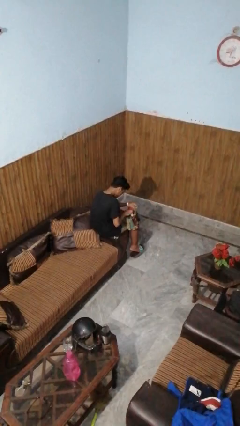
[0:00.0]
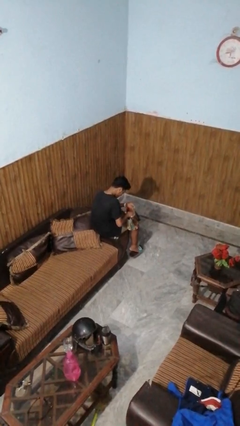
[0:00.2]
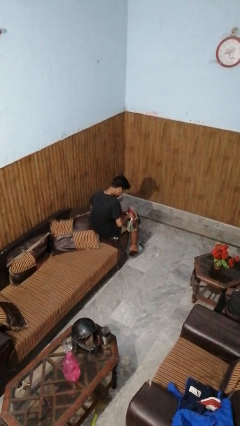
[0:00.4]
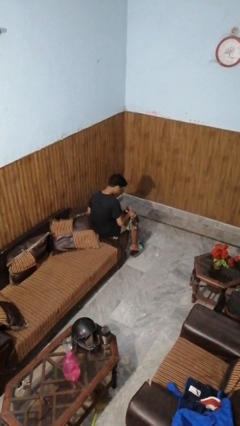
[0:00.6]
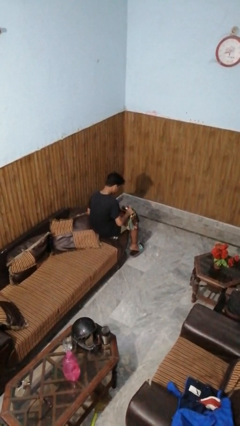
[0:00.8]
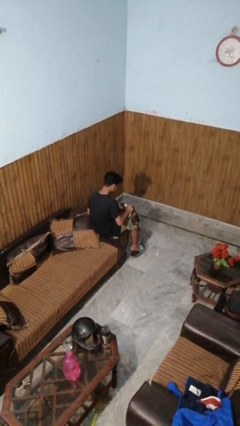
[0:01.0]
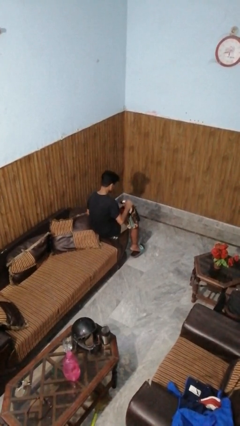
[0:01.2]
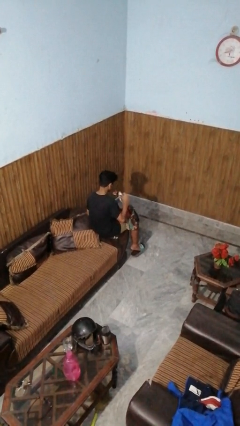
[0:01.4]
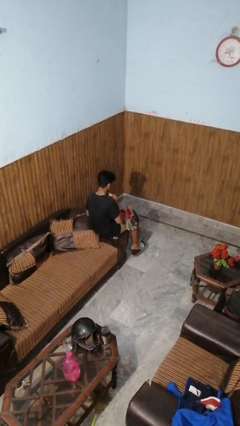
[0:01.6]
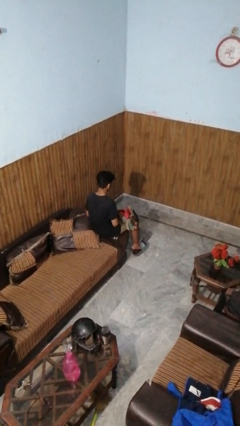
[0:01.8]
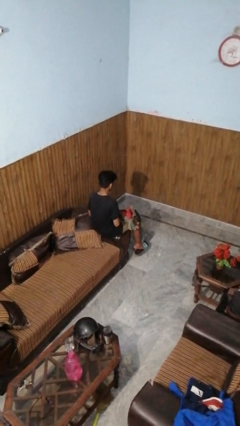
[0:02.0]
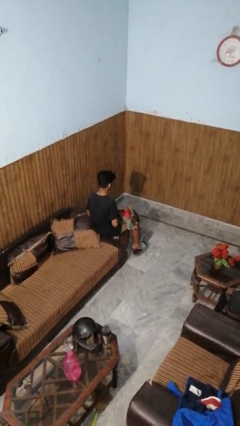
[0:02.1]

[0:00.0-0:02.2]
person takes object from purse

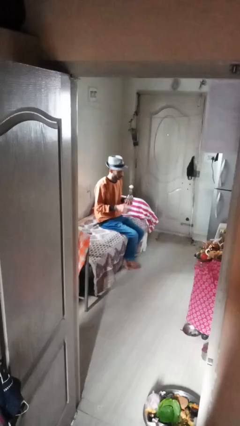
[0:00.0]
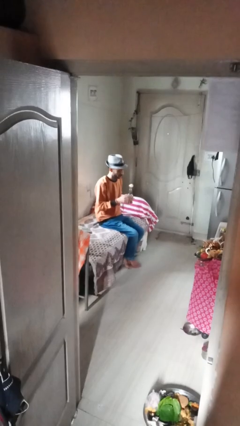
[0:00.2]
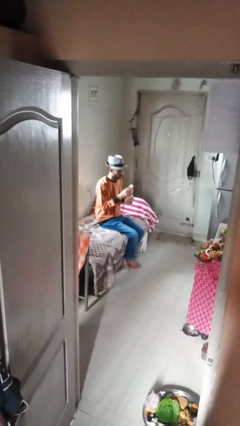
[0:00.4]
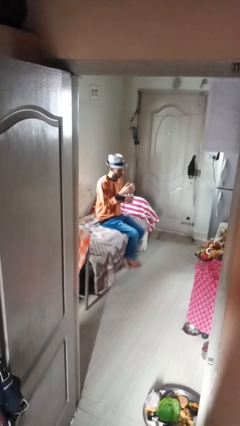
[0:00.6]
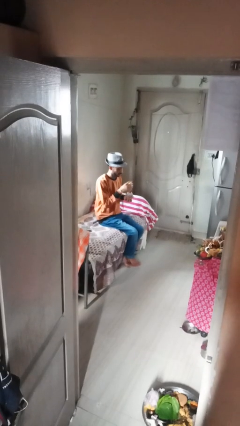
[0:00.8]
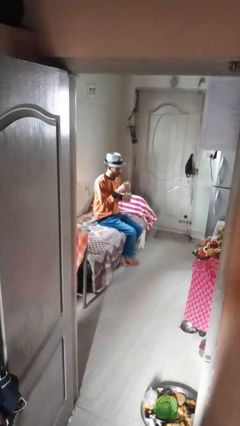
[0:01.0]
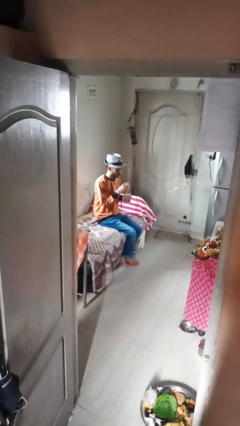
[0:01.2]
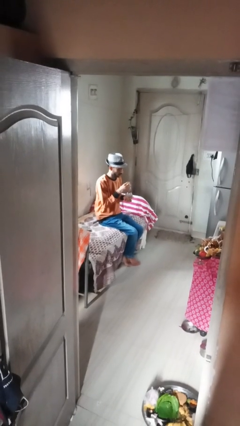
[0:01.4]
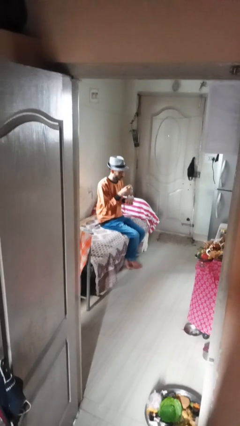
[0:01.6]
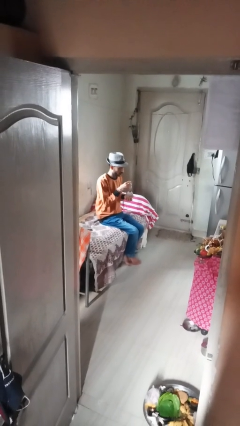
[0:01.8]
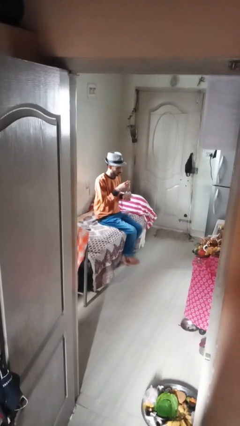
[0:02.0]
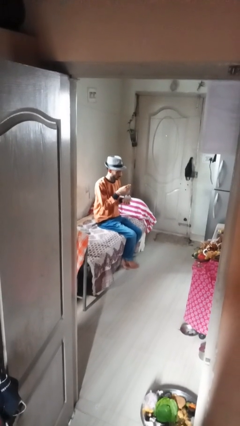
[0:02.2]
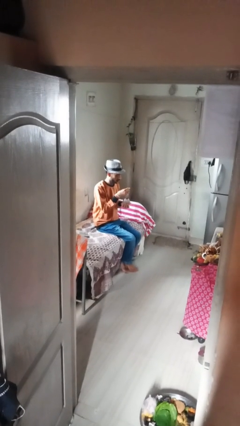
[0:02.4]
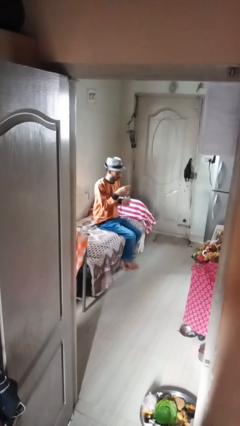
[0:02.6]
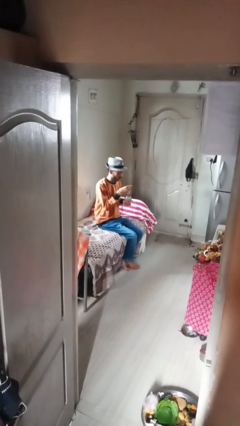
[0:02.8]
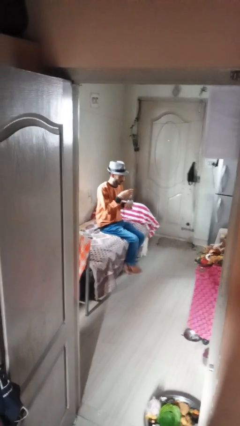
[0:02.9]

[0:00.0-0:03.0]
person arranges flowers in vase

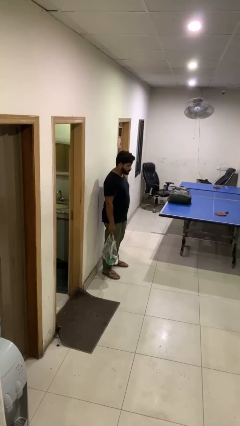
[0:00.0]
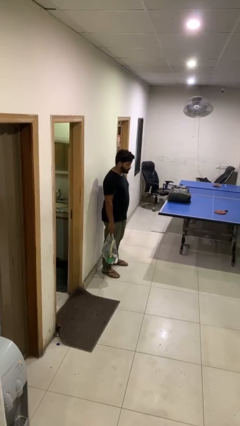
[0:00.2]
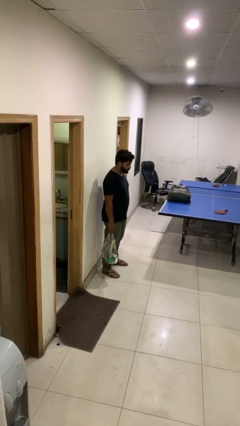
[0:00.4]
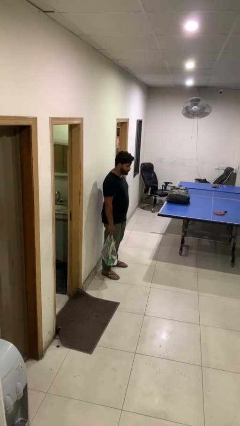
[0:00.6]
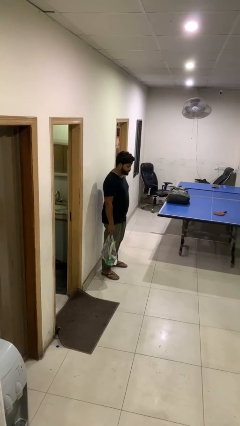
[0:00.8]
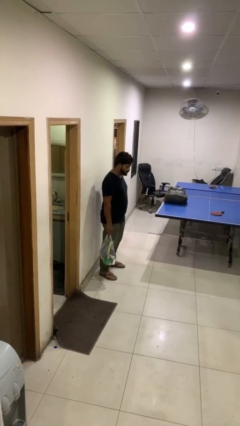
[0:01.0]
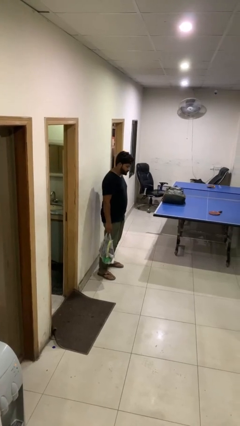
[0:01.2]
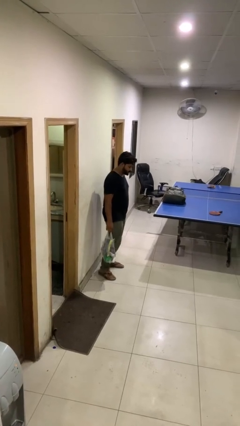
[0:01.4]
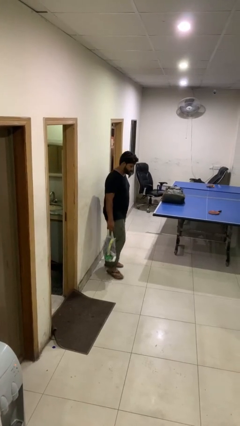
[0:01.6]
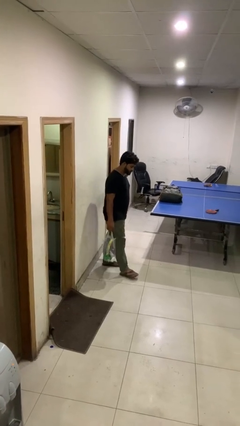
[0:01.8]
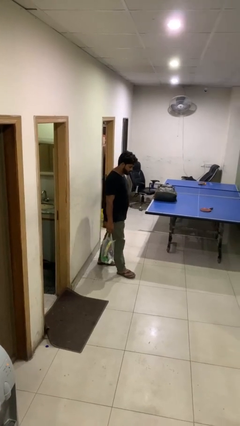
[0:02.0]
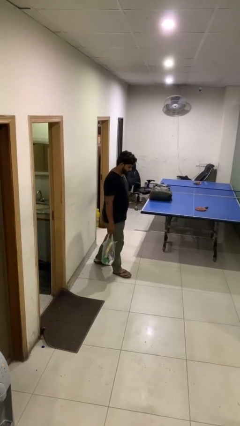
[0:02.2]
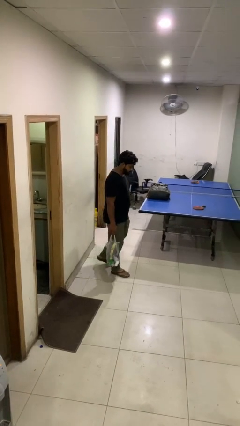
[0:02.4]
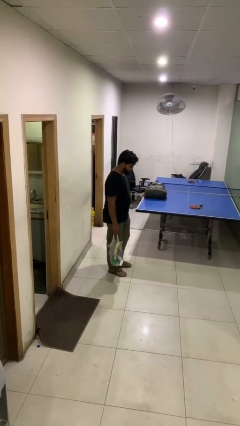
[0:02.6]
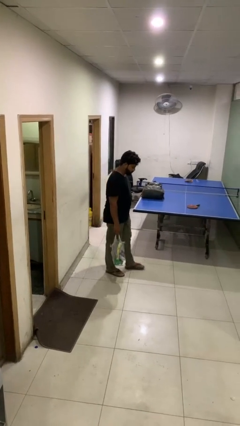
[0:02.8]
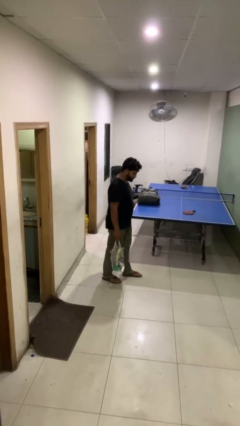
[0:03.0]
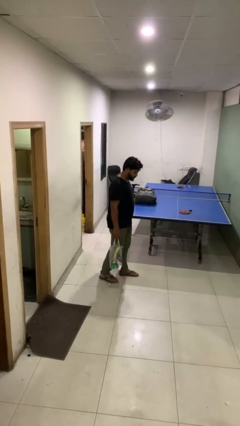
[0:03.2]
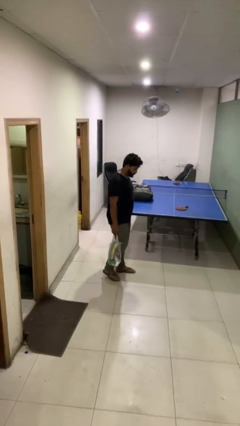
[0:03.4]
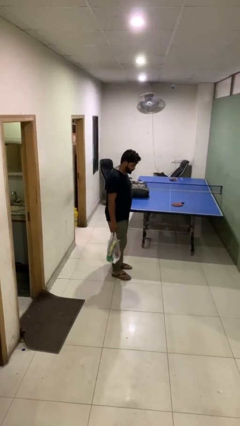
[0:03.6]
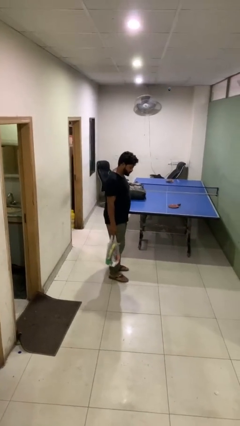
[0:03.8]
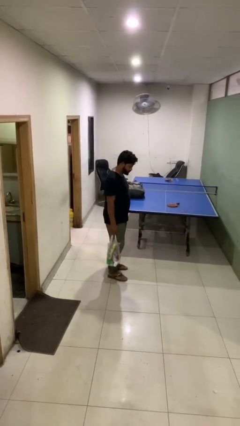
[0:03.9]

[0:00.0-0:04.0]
person carries groceries

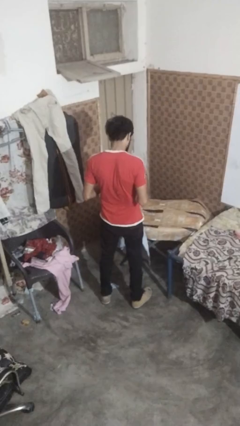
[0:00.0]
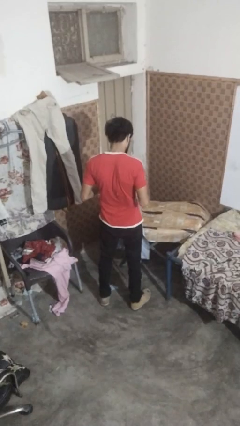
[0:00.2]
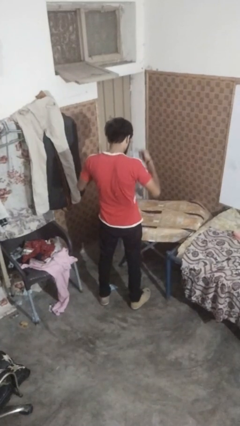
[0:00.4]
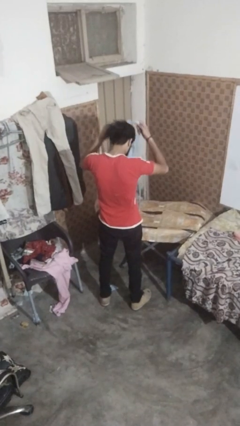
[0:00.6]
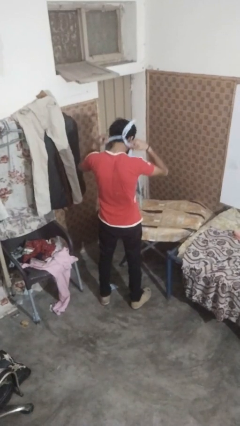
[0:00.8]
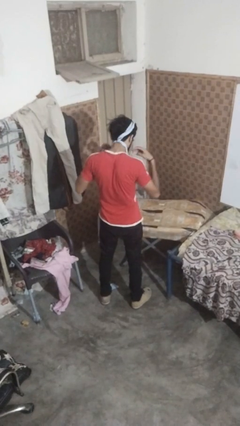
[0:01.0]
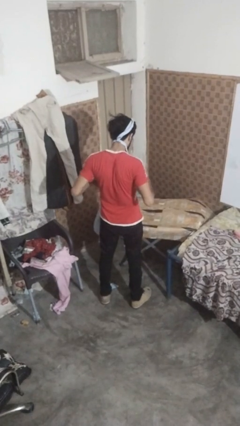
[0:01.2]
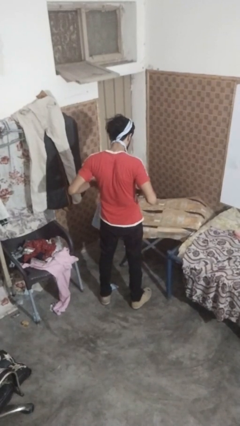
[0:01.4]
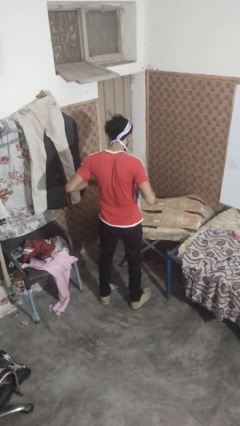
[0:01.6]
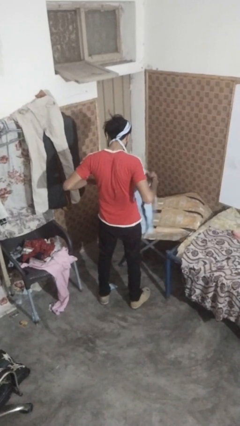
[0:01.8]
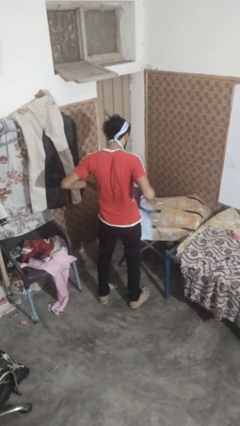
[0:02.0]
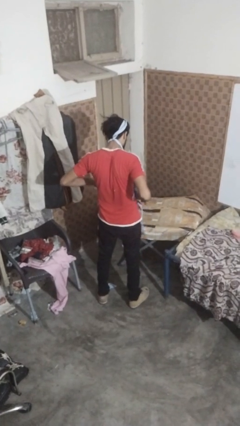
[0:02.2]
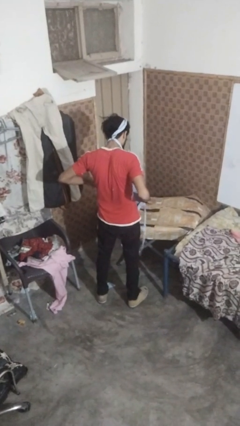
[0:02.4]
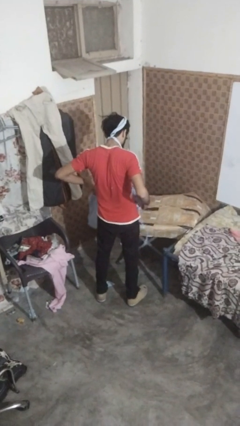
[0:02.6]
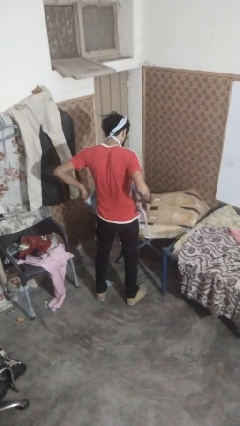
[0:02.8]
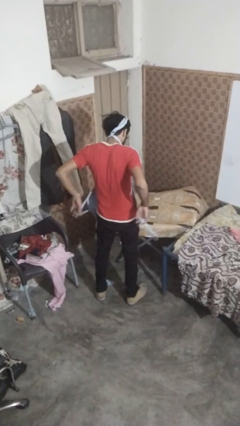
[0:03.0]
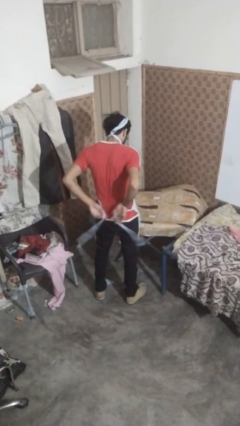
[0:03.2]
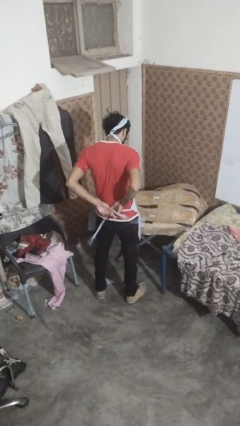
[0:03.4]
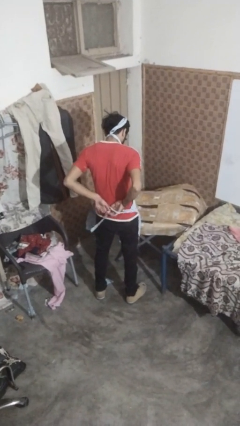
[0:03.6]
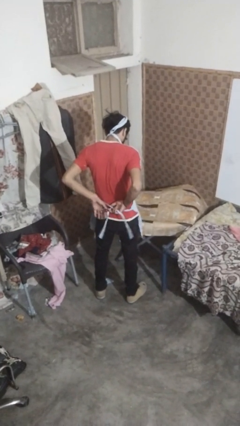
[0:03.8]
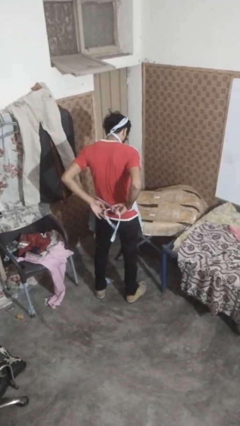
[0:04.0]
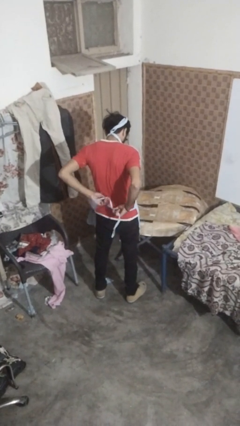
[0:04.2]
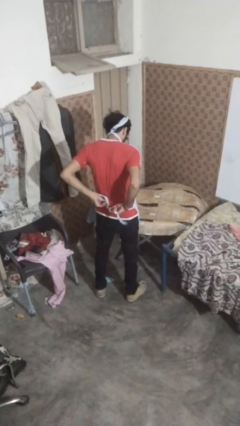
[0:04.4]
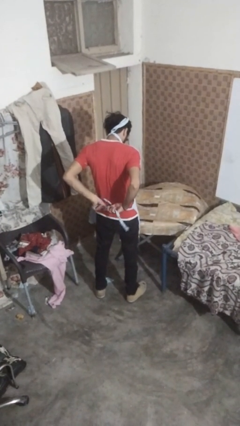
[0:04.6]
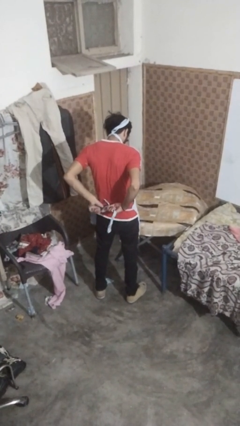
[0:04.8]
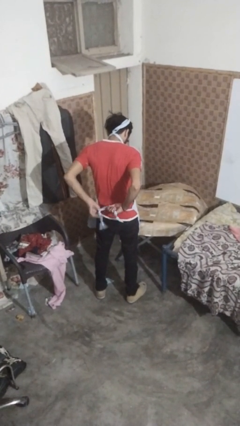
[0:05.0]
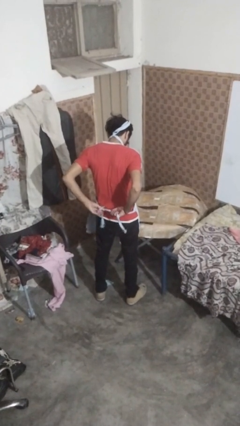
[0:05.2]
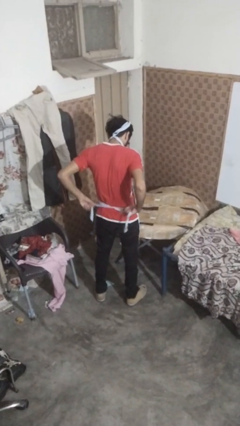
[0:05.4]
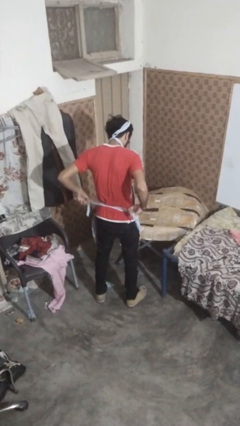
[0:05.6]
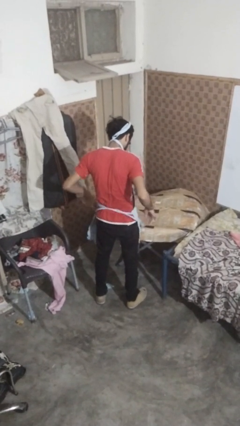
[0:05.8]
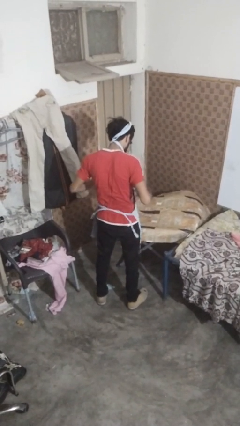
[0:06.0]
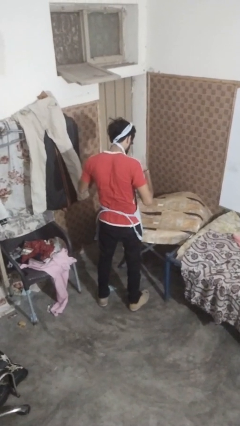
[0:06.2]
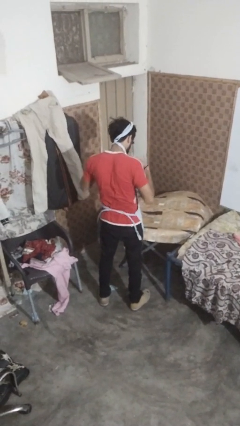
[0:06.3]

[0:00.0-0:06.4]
person puts on apron

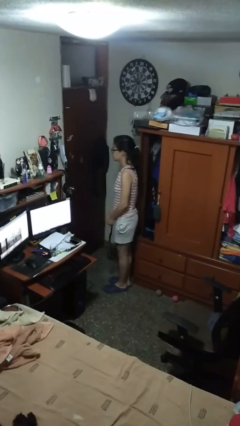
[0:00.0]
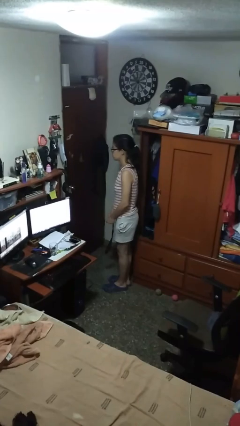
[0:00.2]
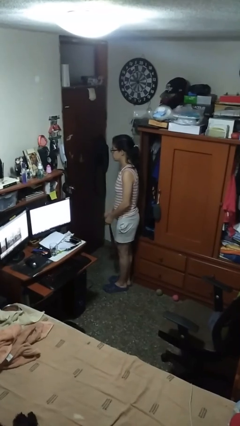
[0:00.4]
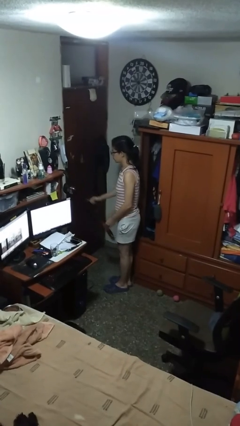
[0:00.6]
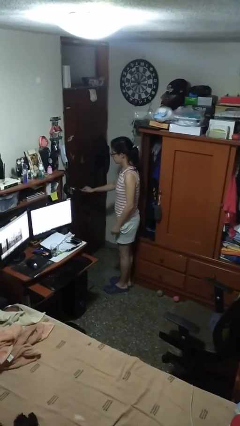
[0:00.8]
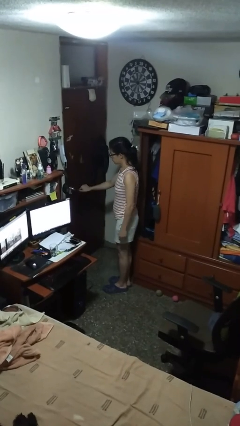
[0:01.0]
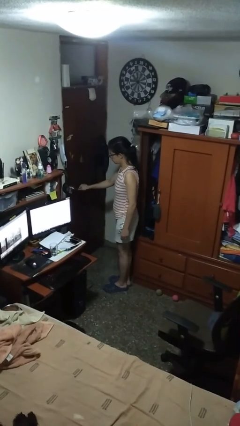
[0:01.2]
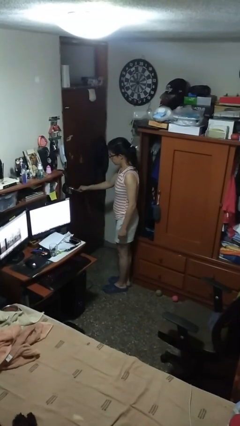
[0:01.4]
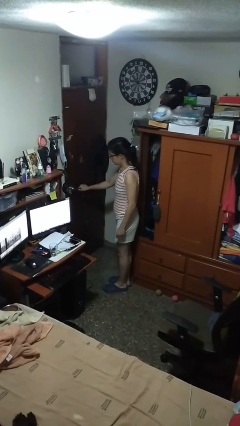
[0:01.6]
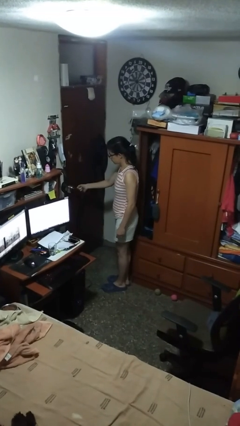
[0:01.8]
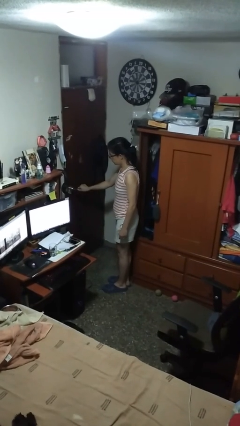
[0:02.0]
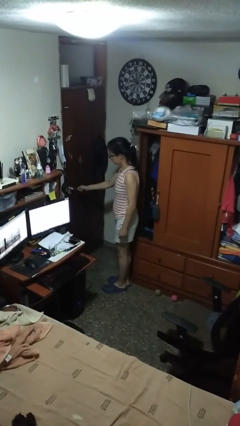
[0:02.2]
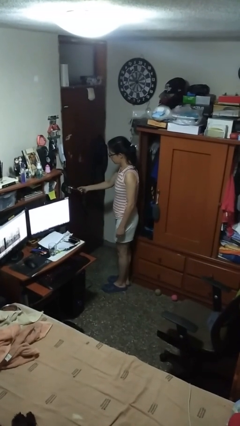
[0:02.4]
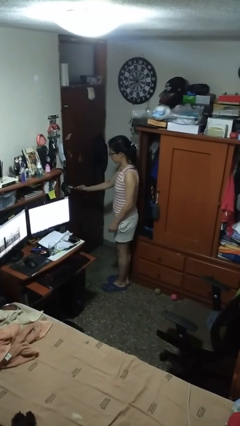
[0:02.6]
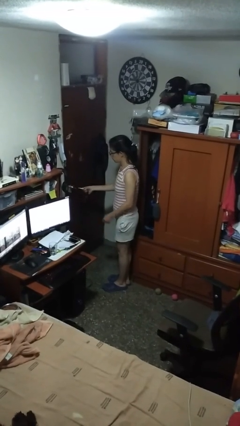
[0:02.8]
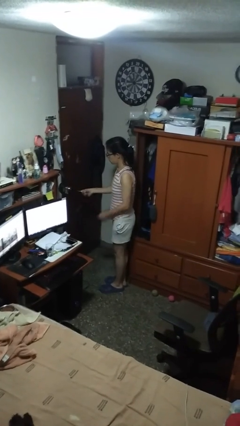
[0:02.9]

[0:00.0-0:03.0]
person unlocks door with keys
